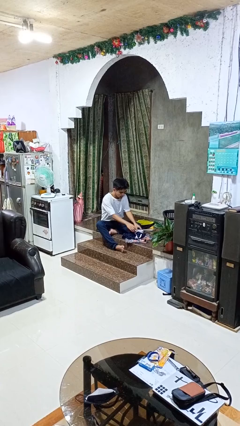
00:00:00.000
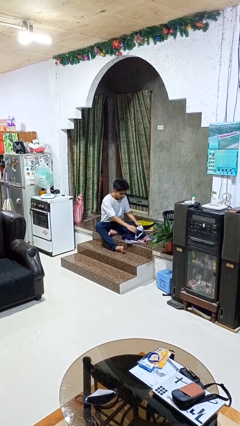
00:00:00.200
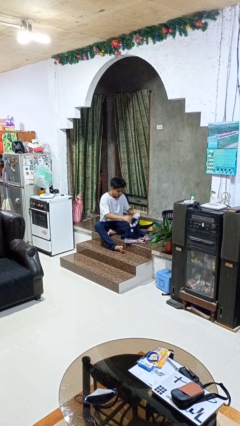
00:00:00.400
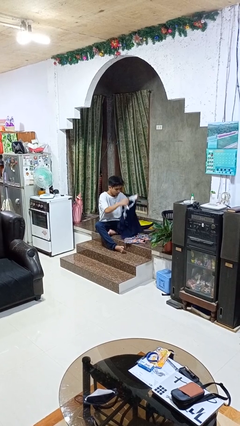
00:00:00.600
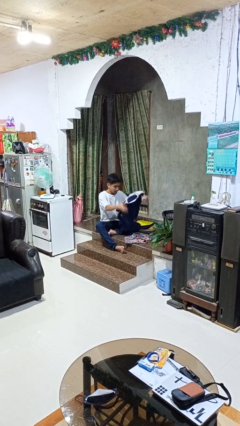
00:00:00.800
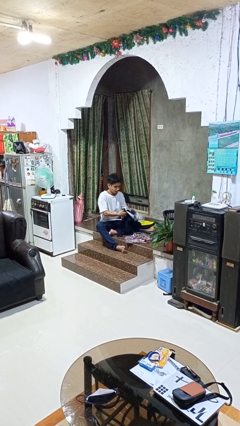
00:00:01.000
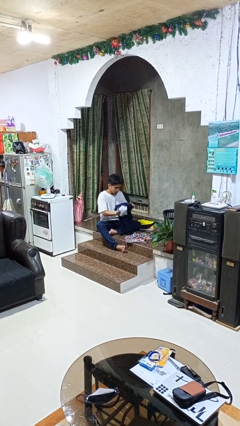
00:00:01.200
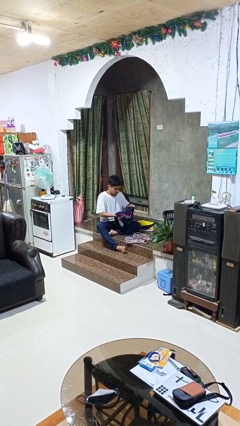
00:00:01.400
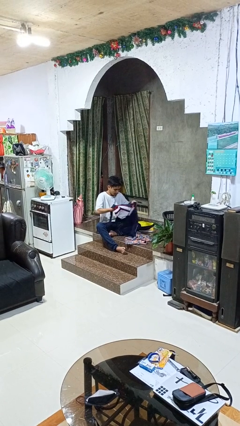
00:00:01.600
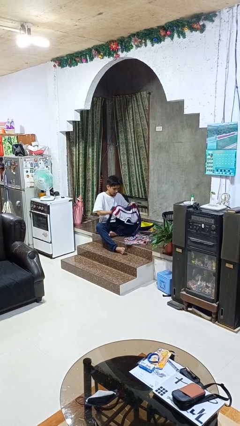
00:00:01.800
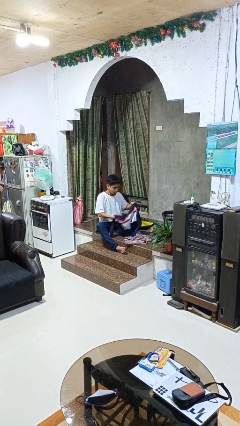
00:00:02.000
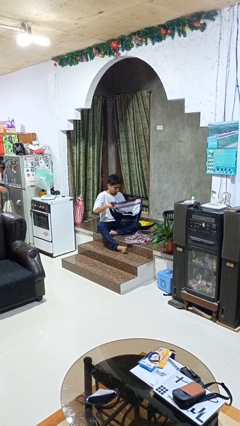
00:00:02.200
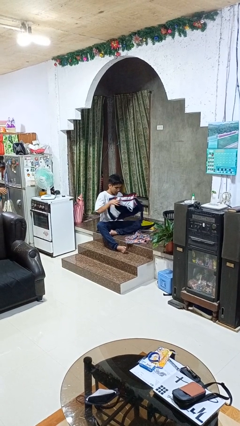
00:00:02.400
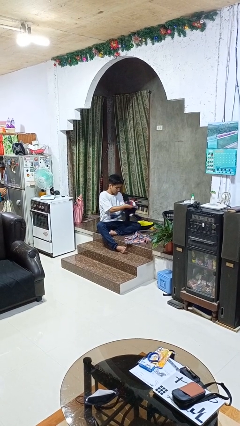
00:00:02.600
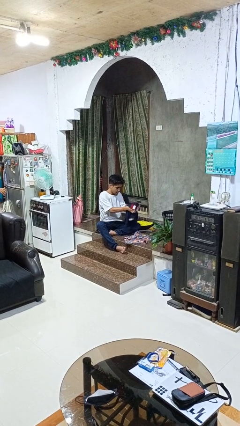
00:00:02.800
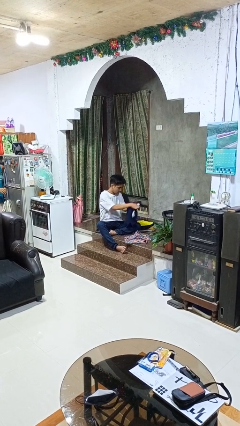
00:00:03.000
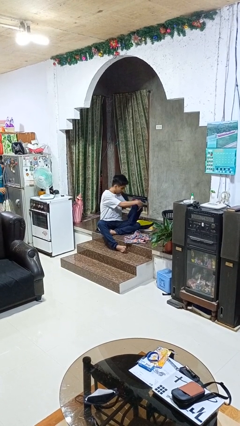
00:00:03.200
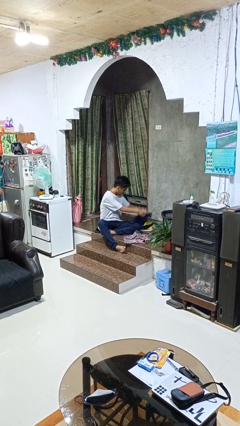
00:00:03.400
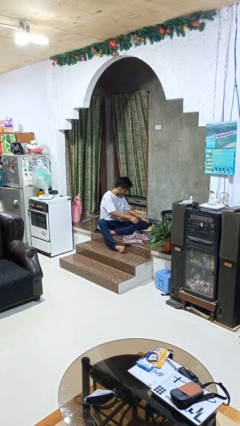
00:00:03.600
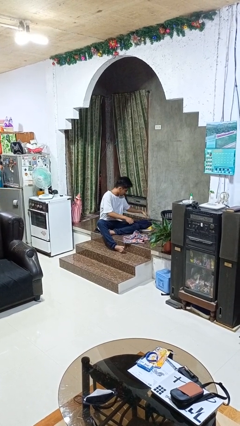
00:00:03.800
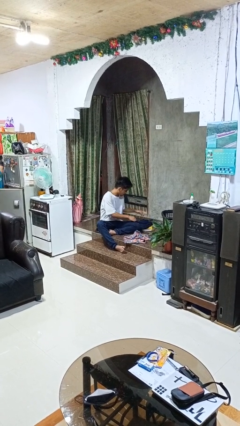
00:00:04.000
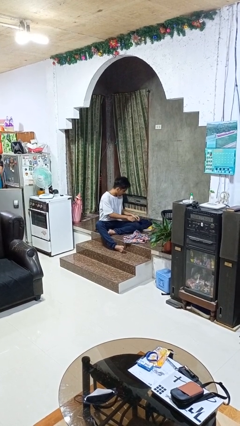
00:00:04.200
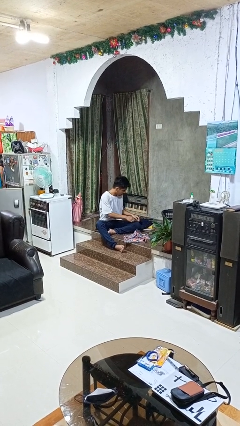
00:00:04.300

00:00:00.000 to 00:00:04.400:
person folds shirt

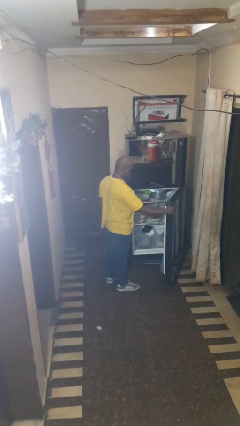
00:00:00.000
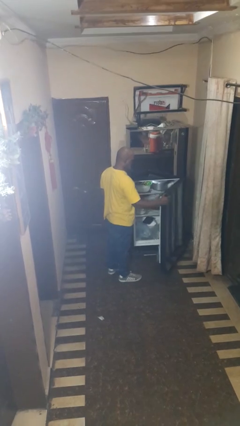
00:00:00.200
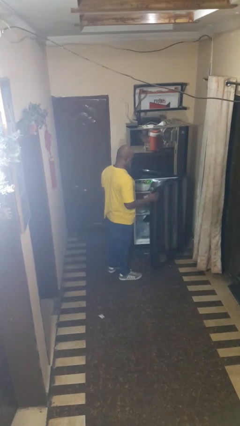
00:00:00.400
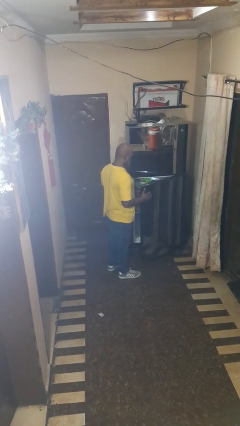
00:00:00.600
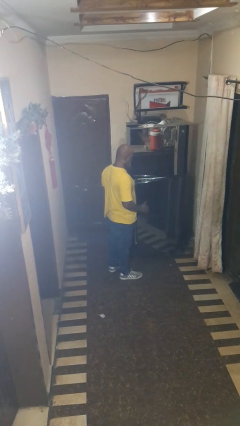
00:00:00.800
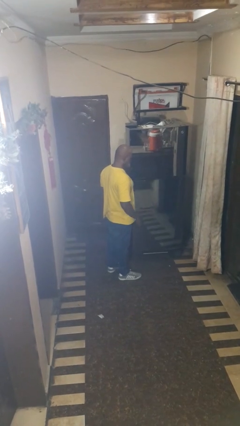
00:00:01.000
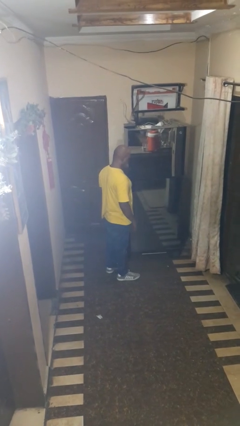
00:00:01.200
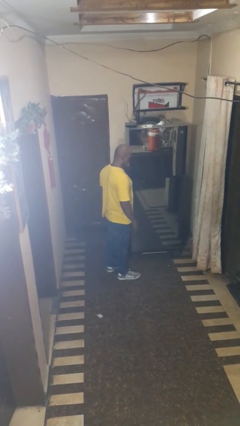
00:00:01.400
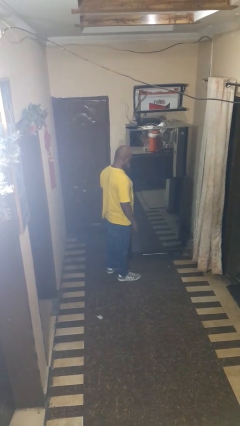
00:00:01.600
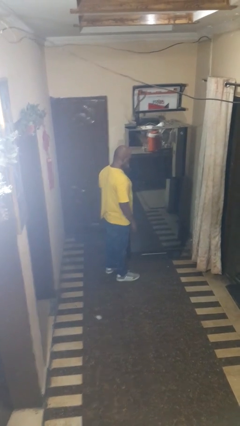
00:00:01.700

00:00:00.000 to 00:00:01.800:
person closes refrigerator

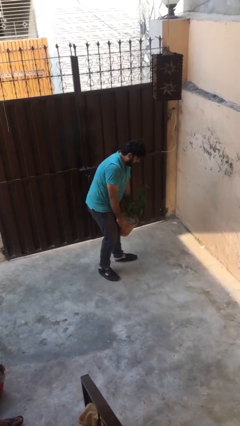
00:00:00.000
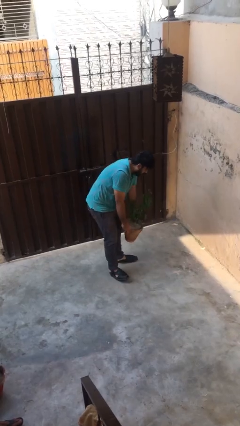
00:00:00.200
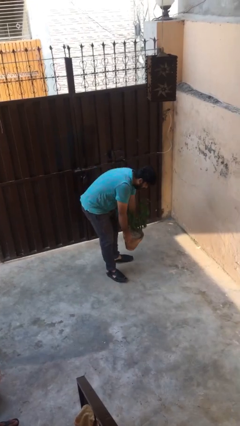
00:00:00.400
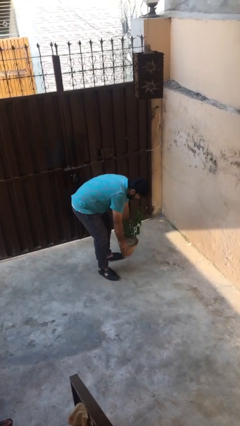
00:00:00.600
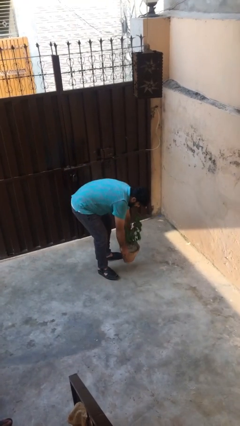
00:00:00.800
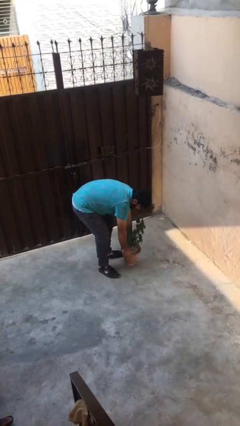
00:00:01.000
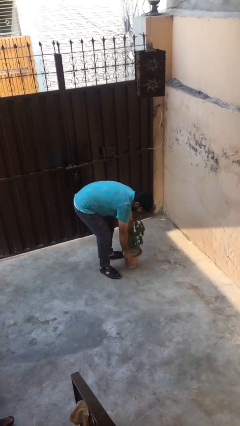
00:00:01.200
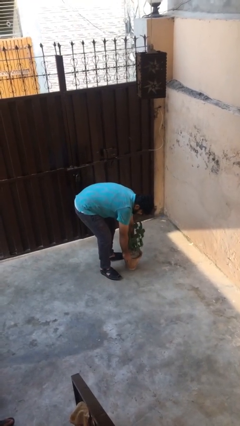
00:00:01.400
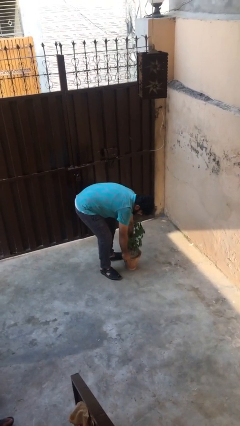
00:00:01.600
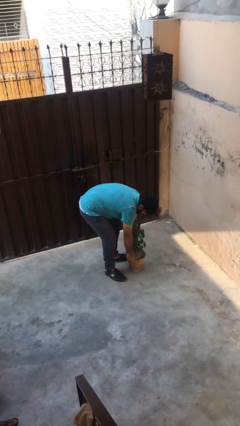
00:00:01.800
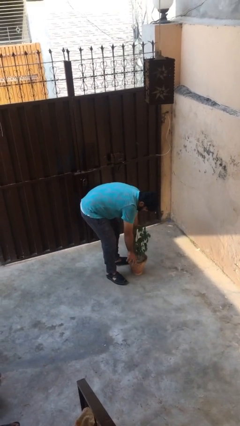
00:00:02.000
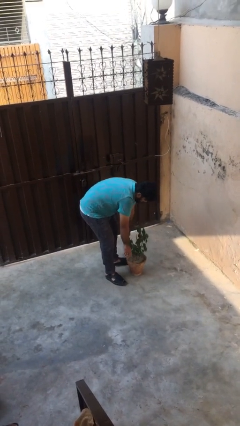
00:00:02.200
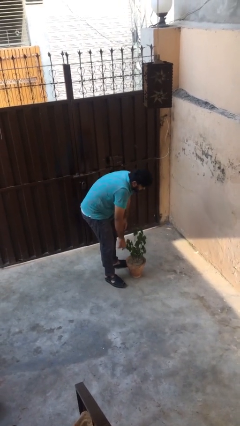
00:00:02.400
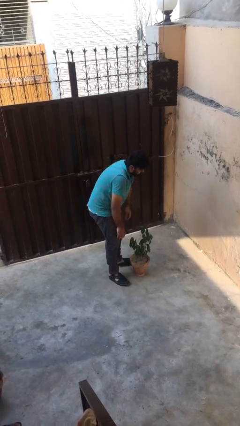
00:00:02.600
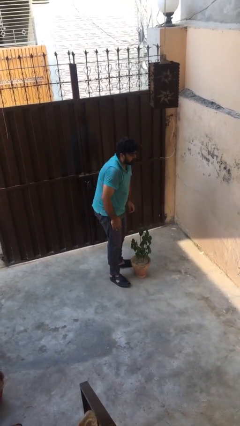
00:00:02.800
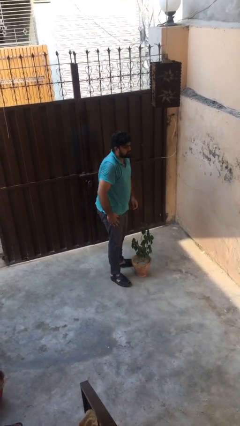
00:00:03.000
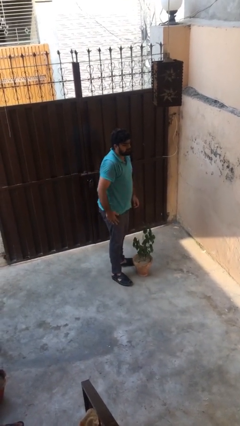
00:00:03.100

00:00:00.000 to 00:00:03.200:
person puts down object on floor

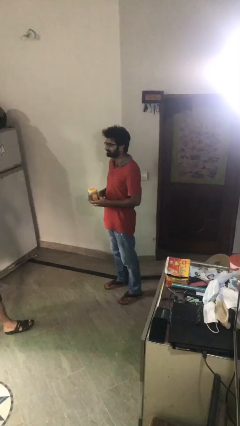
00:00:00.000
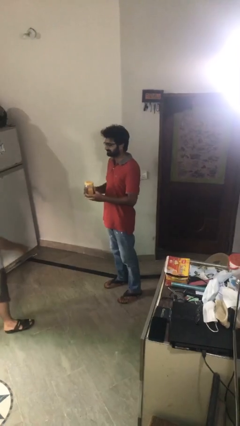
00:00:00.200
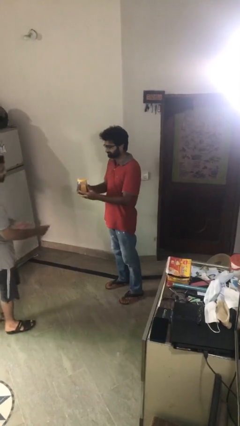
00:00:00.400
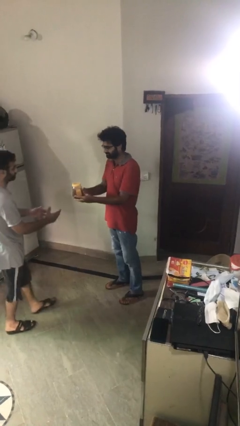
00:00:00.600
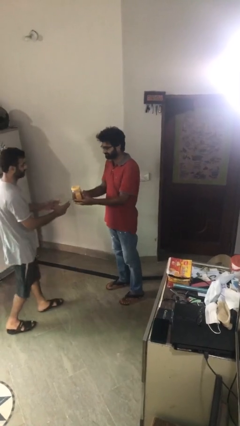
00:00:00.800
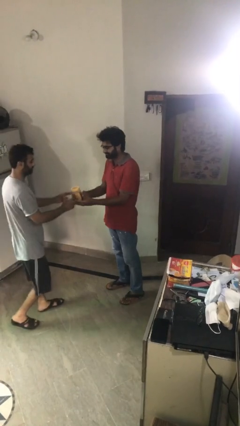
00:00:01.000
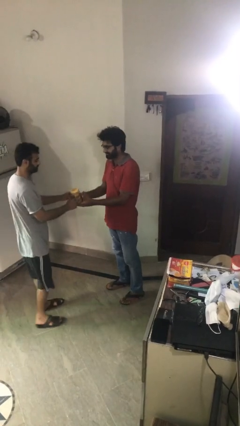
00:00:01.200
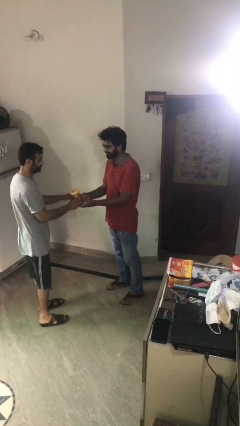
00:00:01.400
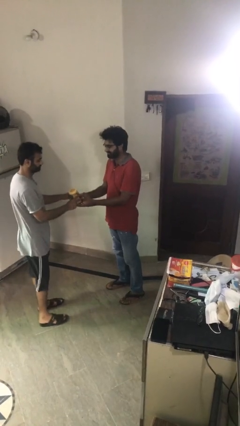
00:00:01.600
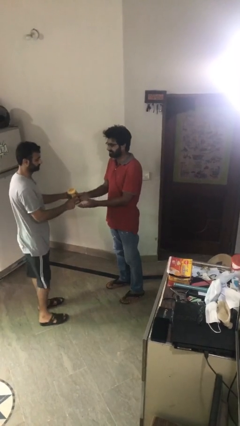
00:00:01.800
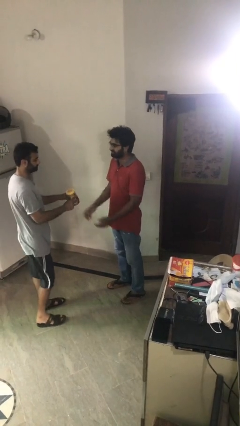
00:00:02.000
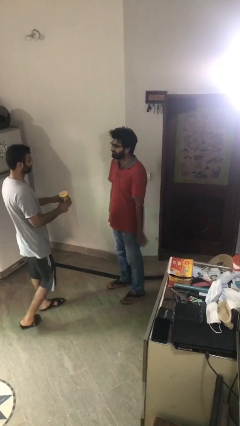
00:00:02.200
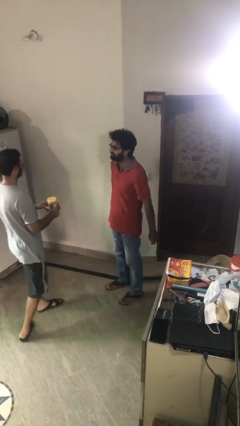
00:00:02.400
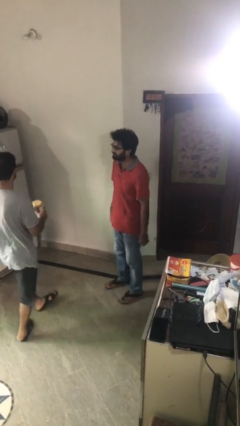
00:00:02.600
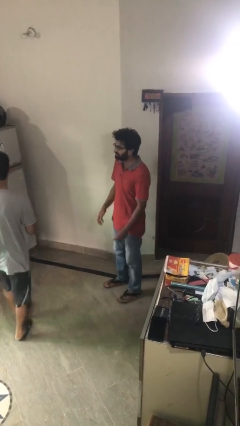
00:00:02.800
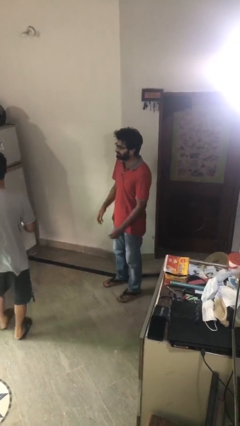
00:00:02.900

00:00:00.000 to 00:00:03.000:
person transfers object to person

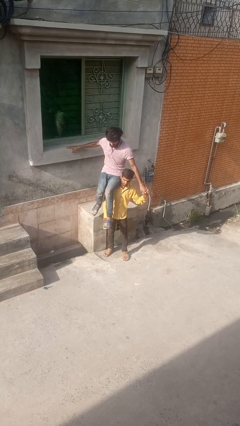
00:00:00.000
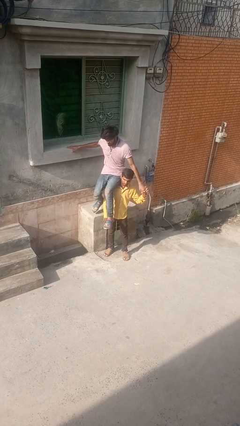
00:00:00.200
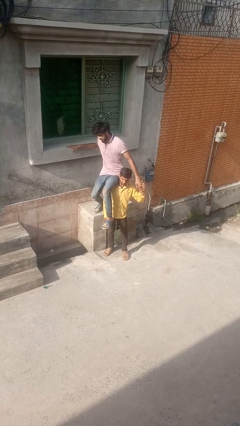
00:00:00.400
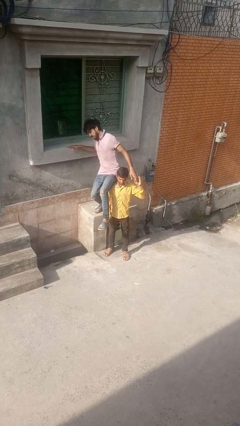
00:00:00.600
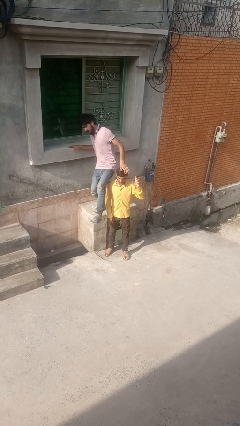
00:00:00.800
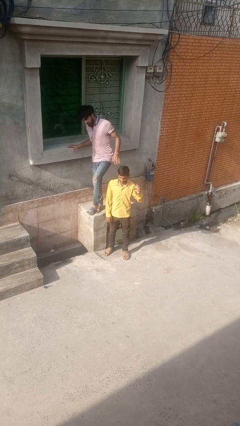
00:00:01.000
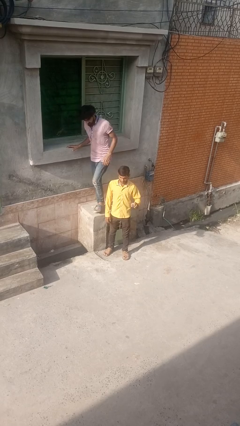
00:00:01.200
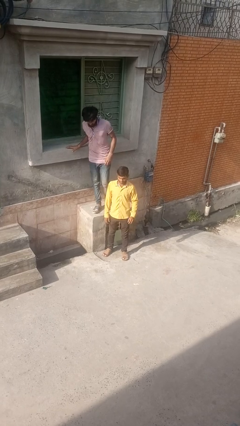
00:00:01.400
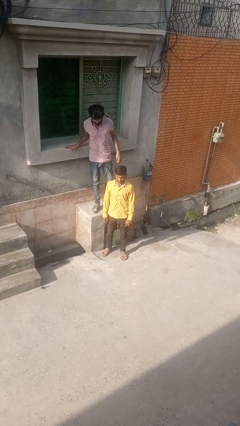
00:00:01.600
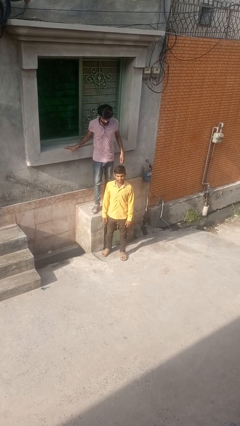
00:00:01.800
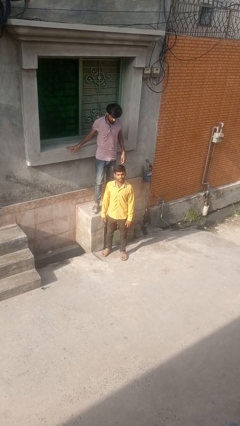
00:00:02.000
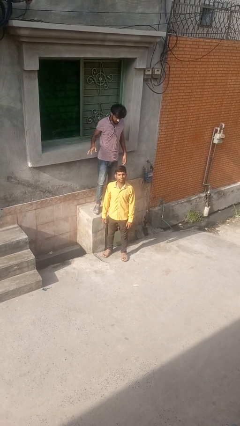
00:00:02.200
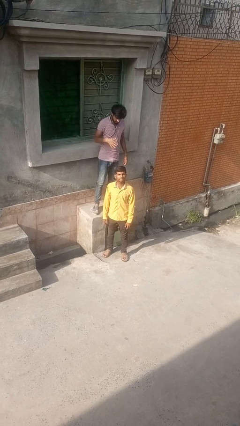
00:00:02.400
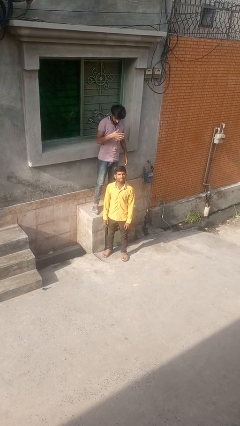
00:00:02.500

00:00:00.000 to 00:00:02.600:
person puts down person

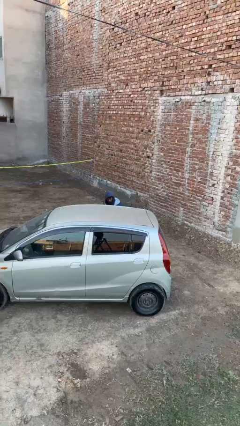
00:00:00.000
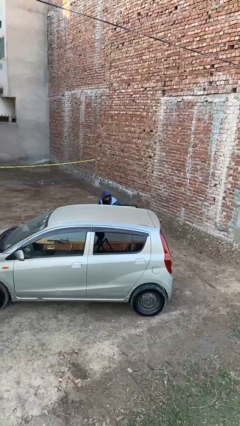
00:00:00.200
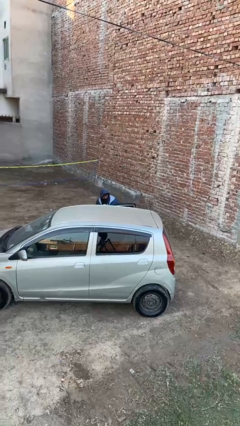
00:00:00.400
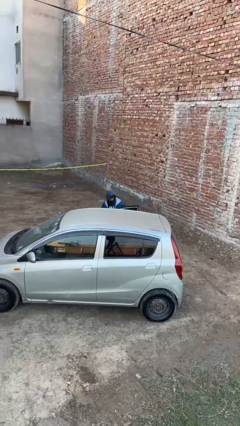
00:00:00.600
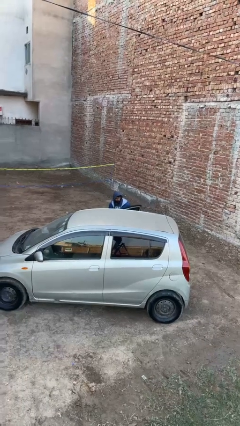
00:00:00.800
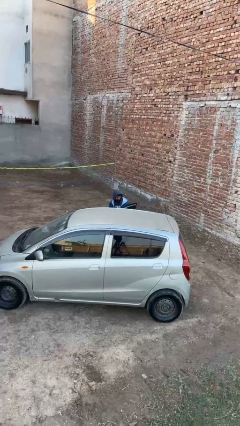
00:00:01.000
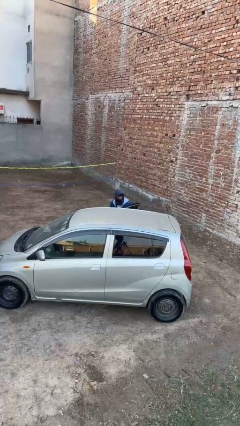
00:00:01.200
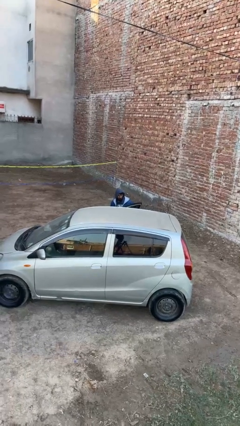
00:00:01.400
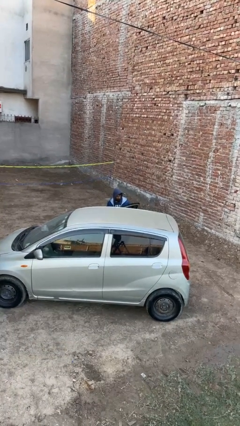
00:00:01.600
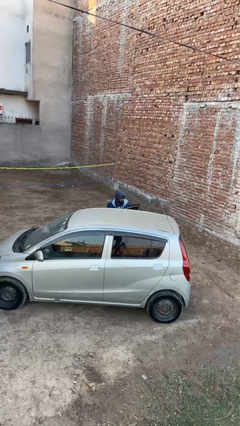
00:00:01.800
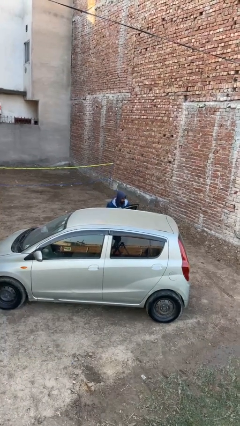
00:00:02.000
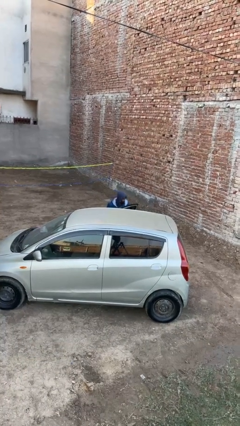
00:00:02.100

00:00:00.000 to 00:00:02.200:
person opens car door

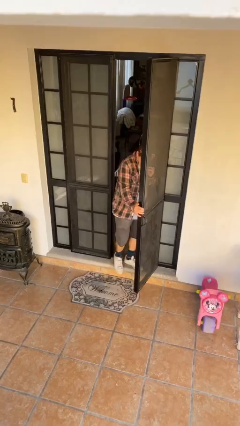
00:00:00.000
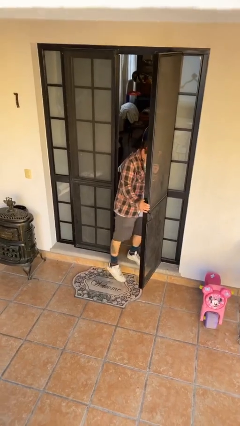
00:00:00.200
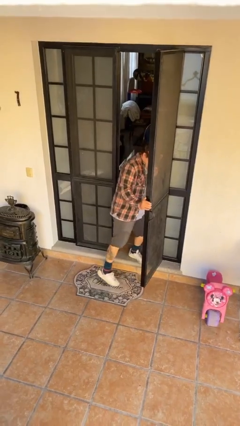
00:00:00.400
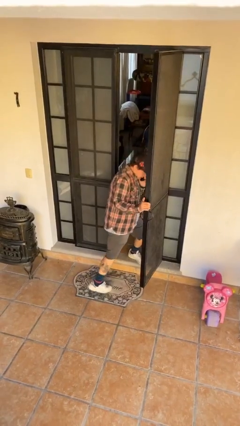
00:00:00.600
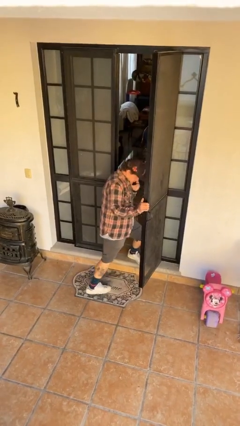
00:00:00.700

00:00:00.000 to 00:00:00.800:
person enters scene through structure
